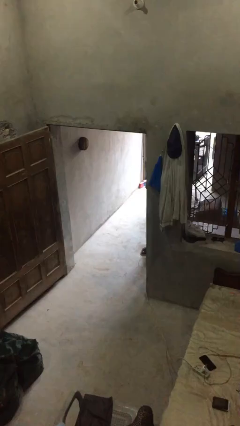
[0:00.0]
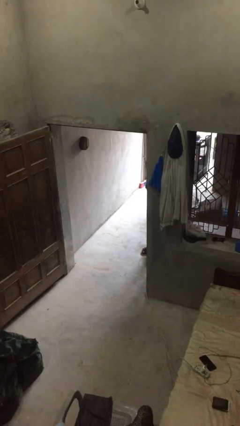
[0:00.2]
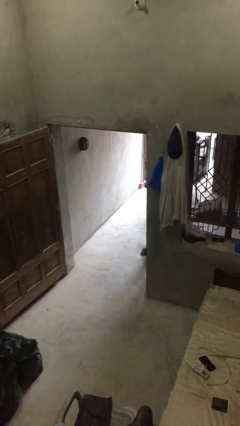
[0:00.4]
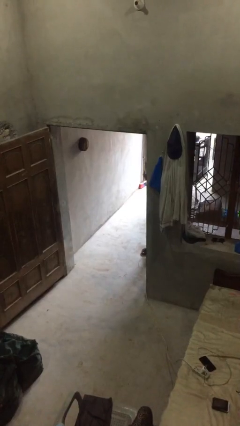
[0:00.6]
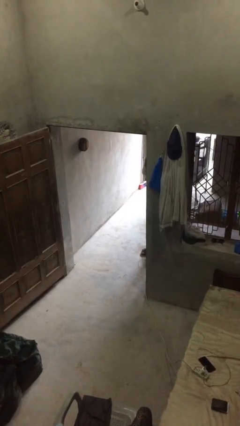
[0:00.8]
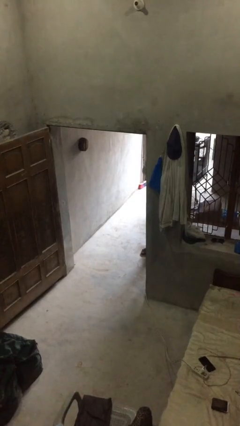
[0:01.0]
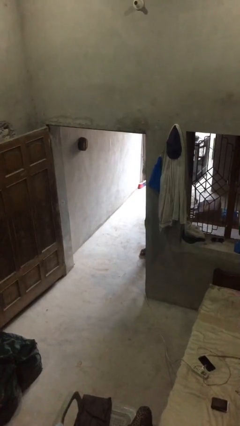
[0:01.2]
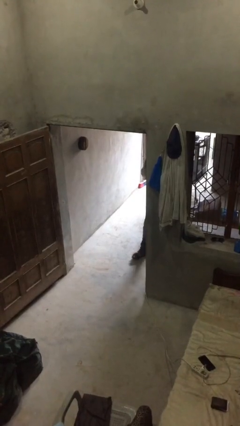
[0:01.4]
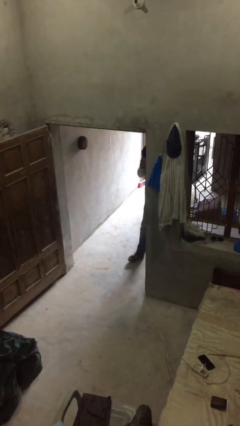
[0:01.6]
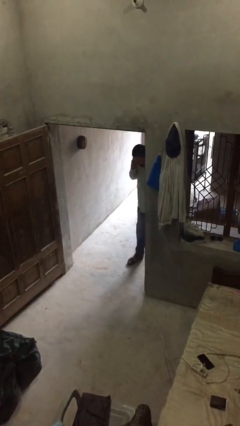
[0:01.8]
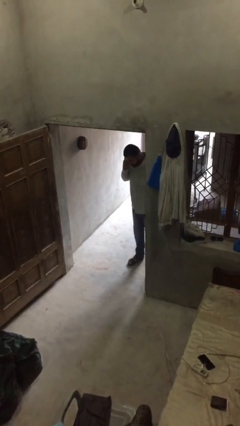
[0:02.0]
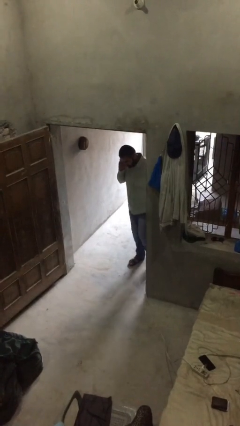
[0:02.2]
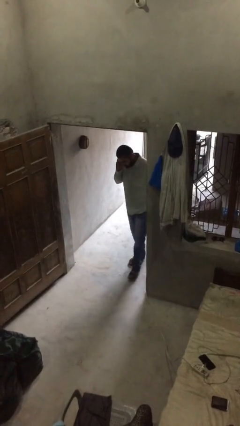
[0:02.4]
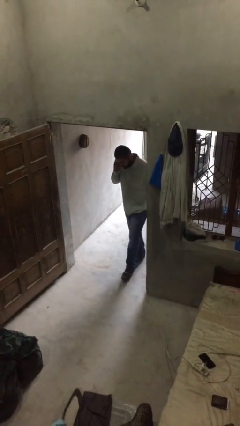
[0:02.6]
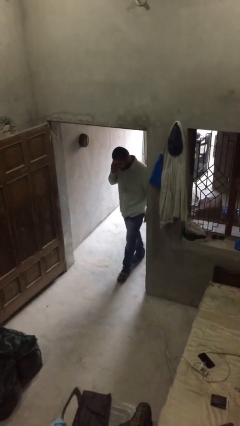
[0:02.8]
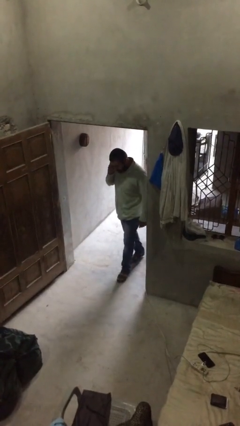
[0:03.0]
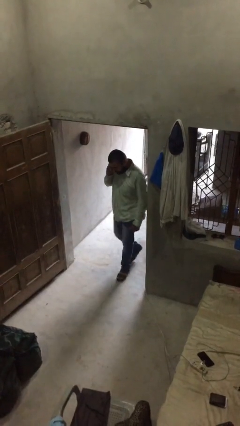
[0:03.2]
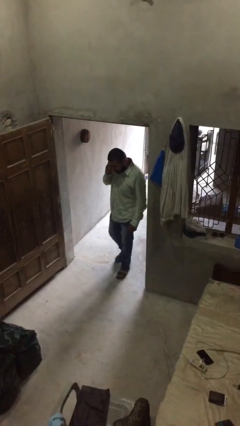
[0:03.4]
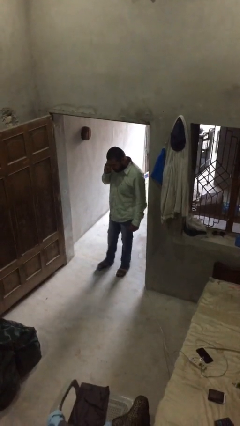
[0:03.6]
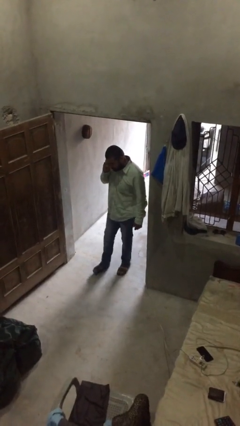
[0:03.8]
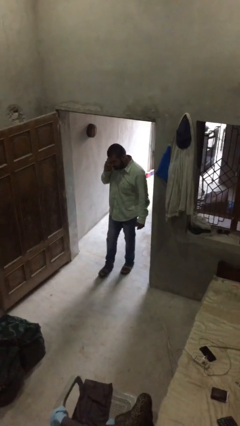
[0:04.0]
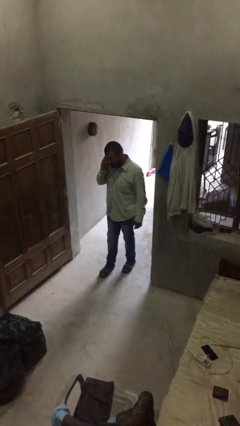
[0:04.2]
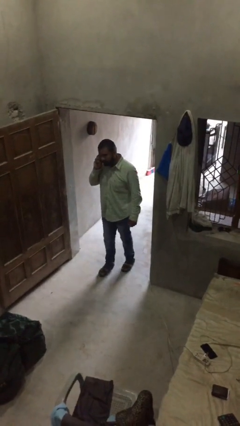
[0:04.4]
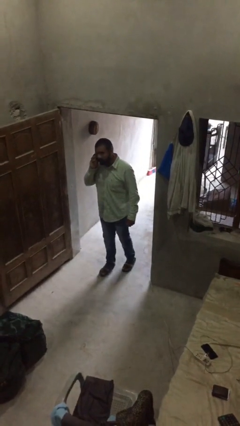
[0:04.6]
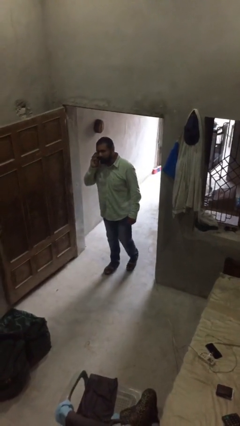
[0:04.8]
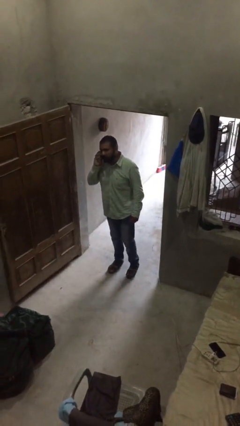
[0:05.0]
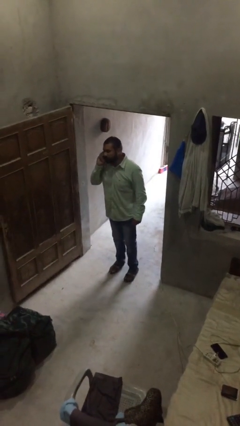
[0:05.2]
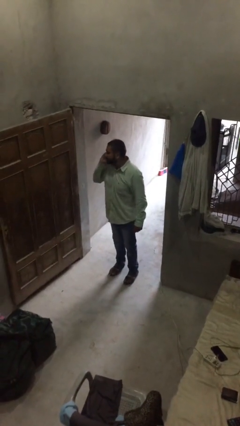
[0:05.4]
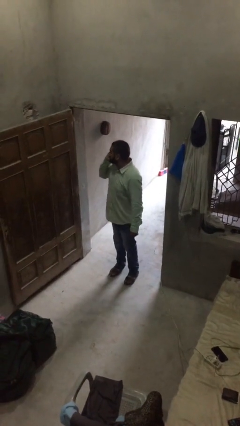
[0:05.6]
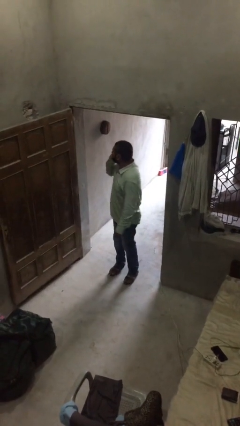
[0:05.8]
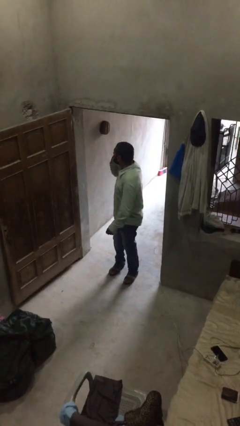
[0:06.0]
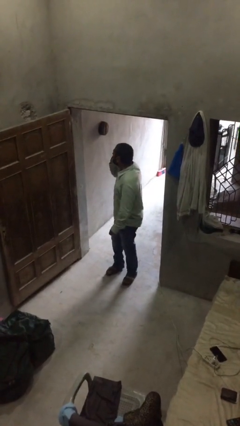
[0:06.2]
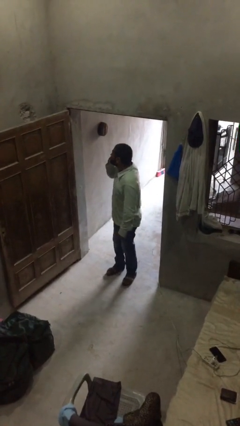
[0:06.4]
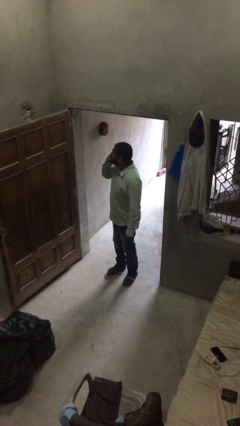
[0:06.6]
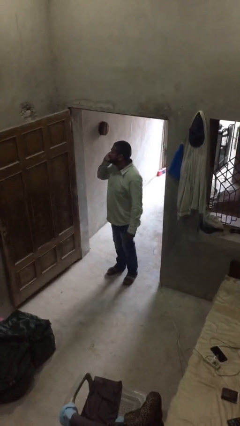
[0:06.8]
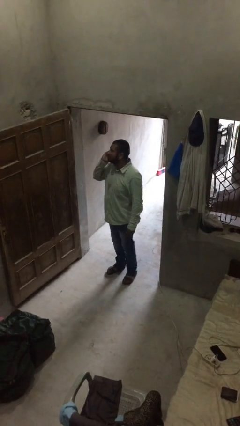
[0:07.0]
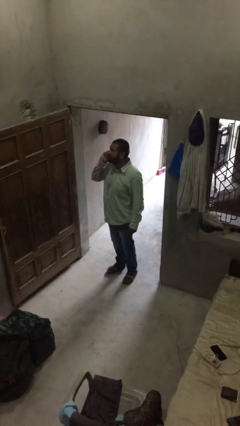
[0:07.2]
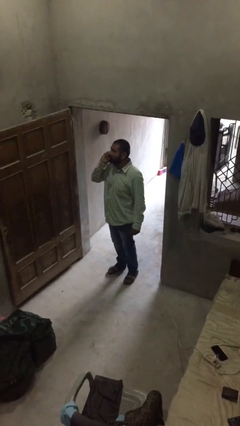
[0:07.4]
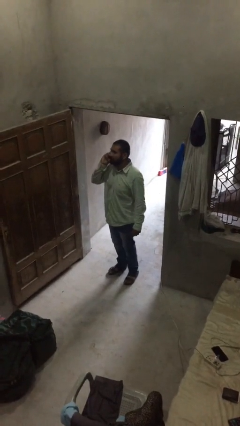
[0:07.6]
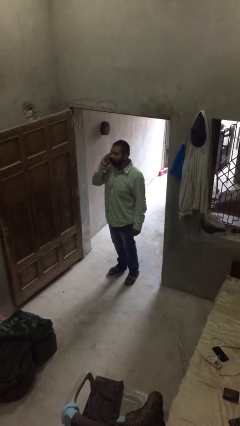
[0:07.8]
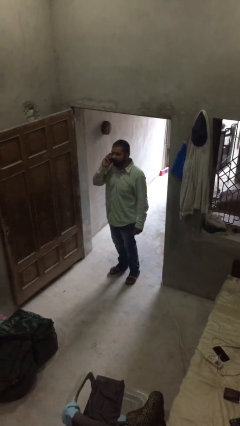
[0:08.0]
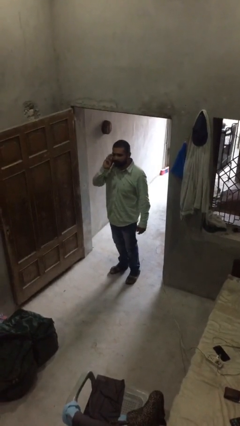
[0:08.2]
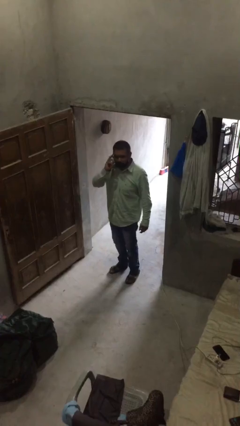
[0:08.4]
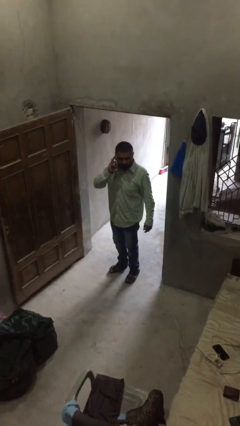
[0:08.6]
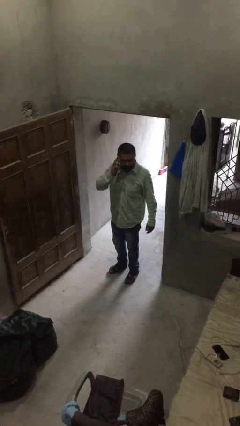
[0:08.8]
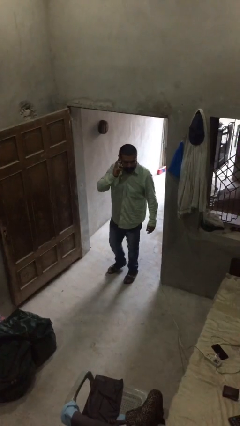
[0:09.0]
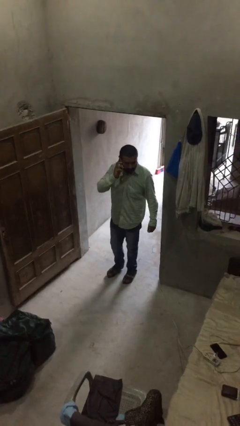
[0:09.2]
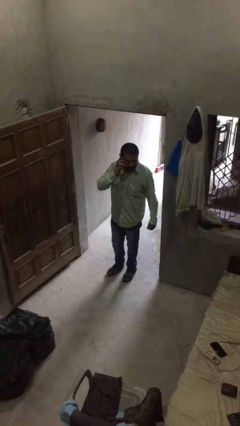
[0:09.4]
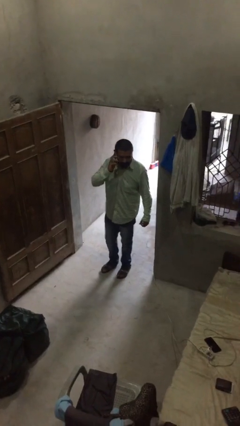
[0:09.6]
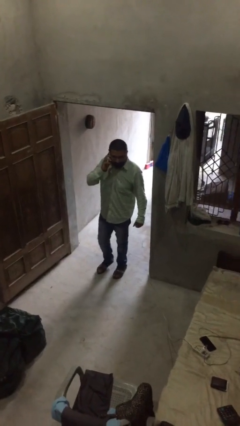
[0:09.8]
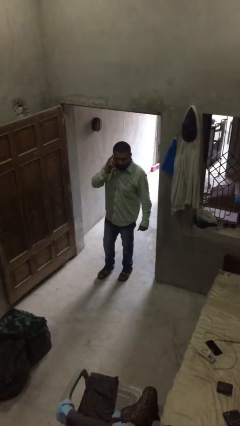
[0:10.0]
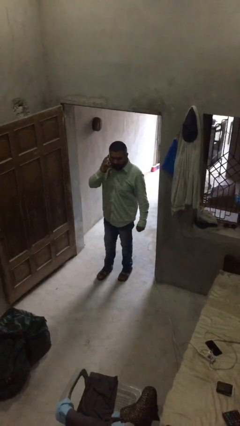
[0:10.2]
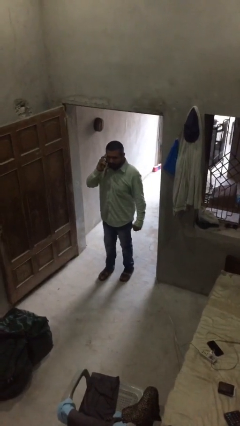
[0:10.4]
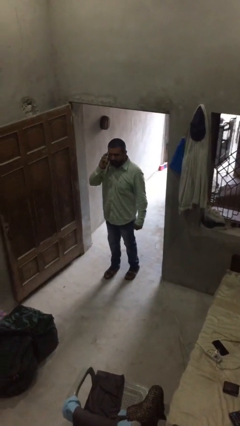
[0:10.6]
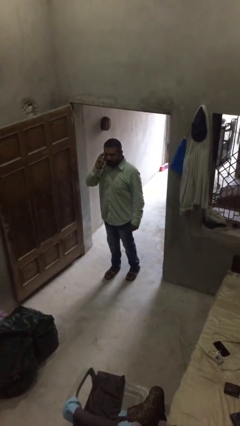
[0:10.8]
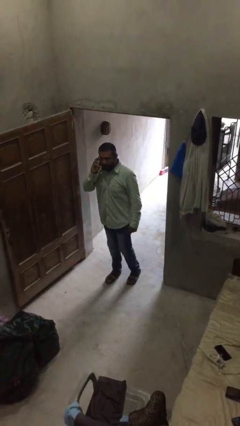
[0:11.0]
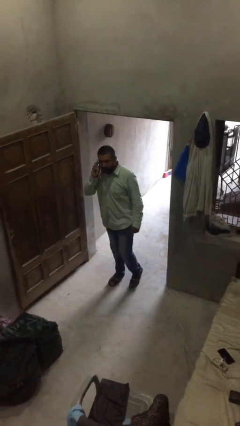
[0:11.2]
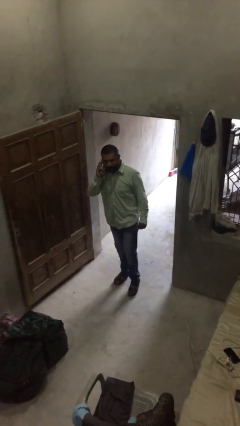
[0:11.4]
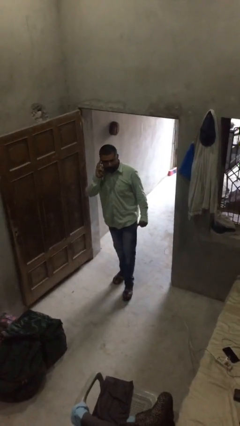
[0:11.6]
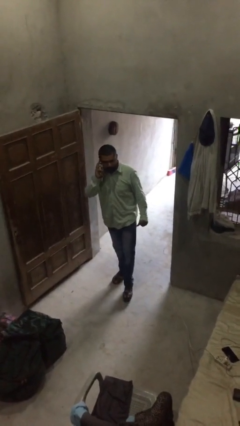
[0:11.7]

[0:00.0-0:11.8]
person enters scene through structure

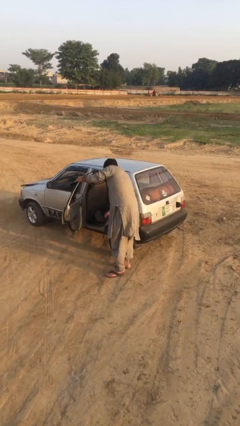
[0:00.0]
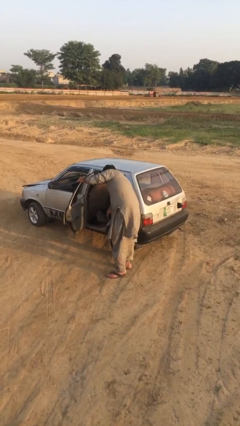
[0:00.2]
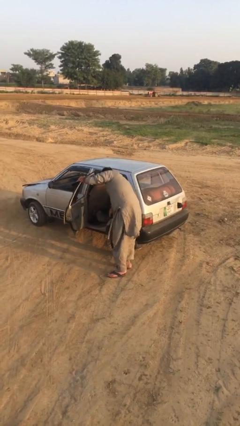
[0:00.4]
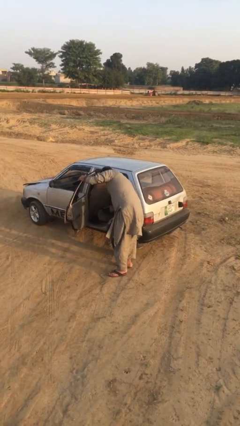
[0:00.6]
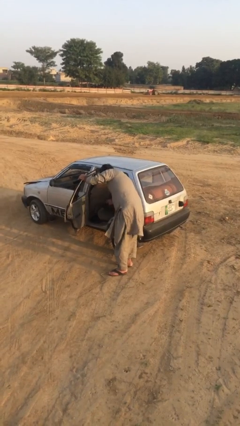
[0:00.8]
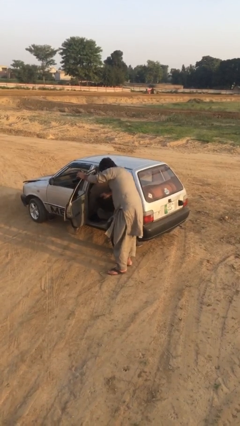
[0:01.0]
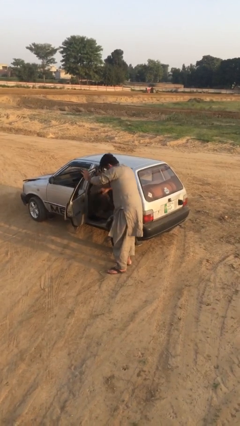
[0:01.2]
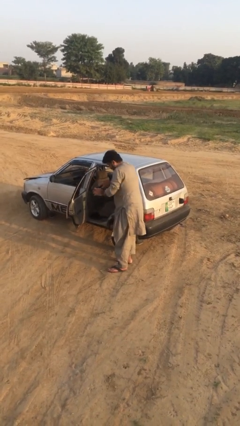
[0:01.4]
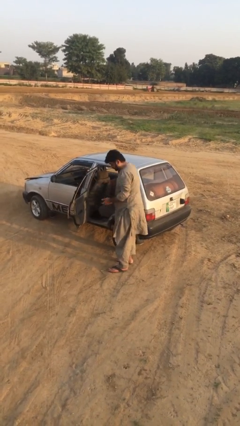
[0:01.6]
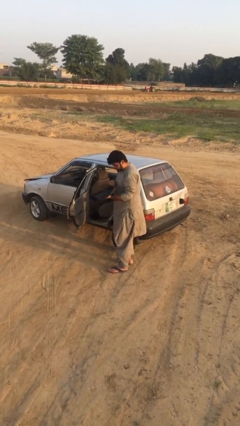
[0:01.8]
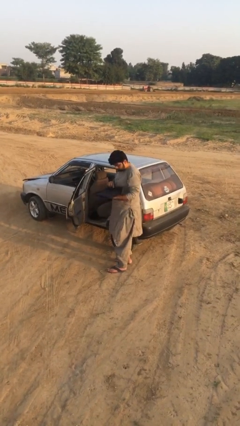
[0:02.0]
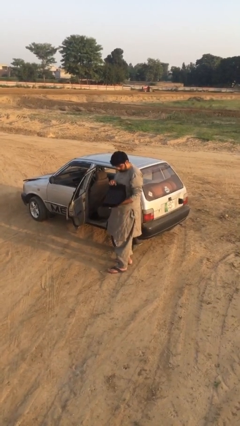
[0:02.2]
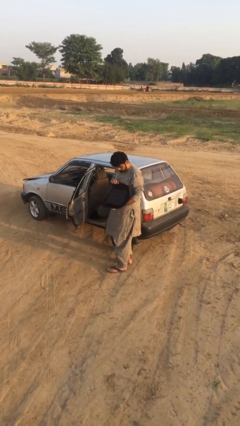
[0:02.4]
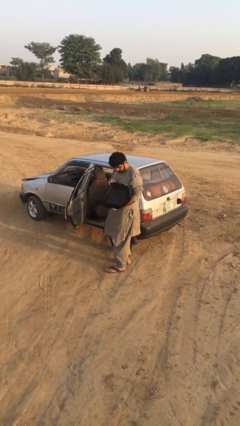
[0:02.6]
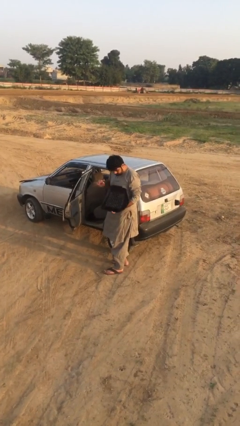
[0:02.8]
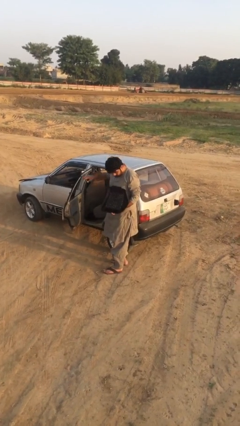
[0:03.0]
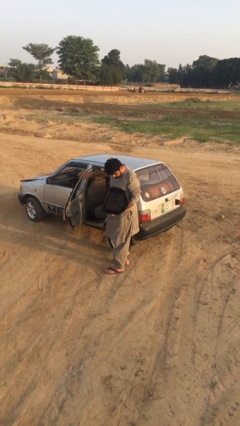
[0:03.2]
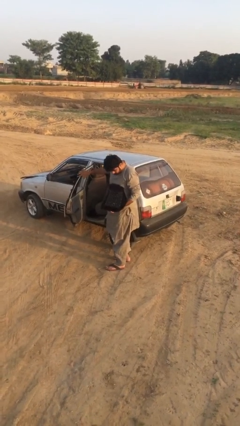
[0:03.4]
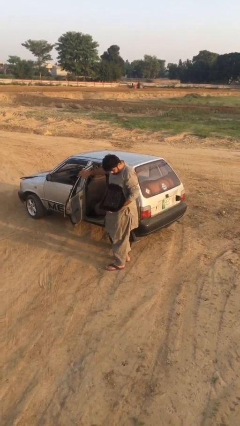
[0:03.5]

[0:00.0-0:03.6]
person unloads car

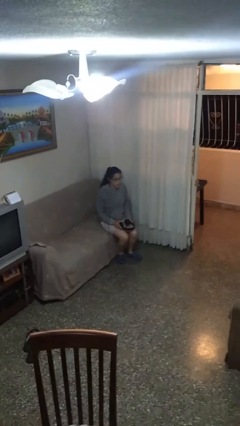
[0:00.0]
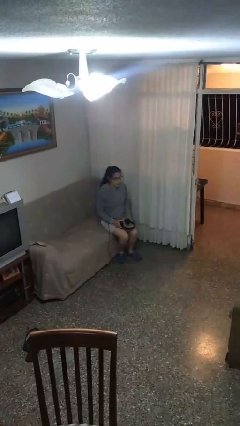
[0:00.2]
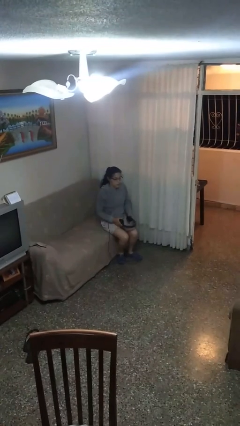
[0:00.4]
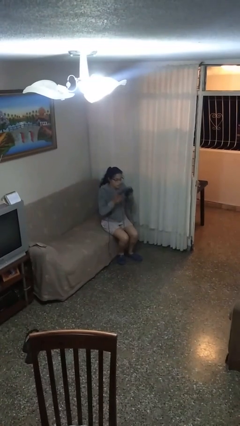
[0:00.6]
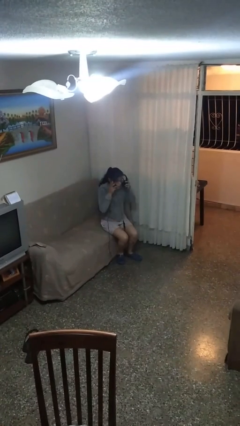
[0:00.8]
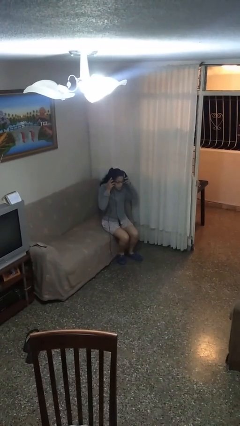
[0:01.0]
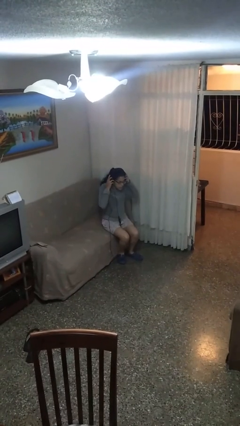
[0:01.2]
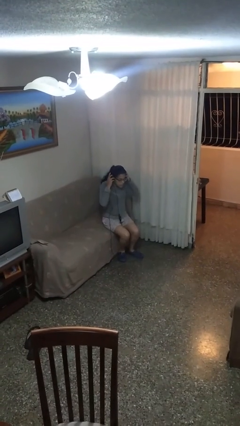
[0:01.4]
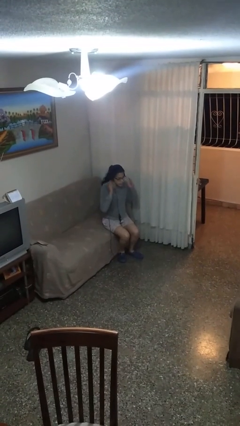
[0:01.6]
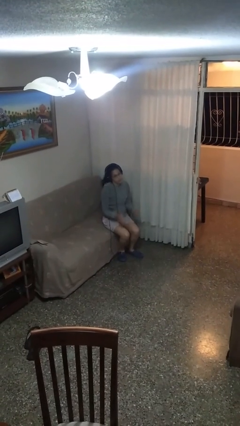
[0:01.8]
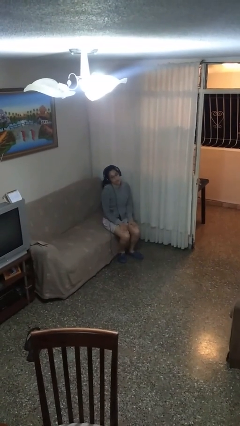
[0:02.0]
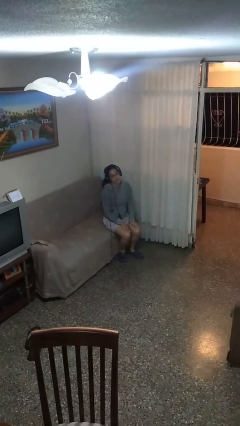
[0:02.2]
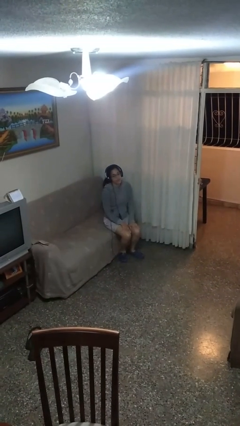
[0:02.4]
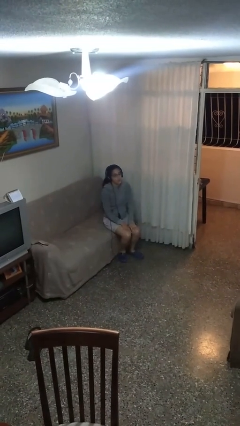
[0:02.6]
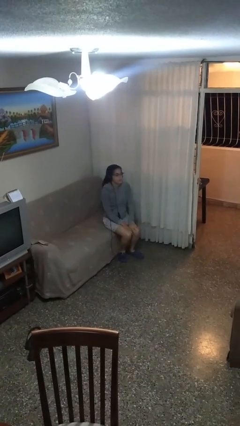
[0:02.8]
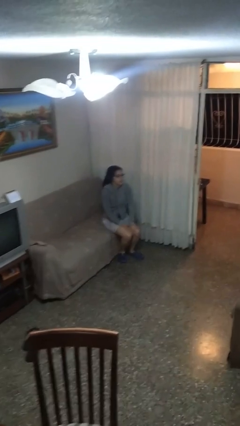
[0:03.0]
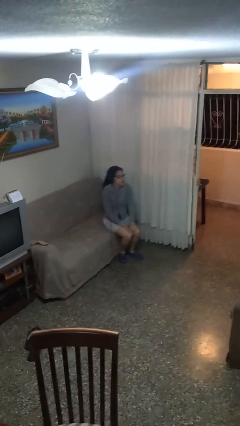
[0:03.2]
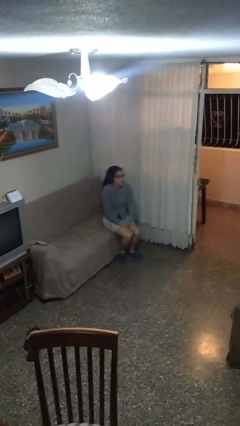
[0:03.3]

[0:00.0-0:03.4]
person puts on headphones
